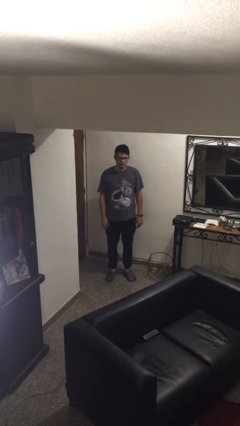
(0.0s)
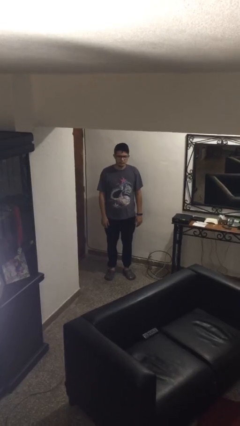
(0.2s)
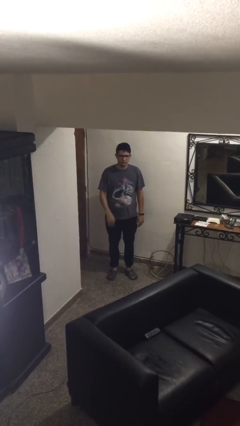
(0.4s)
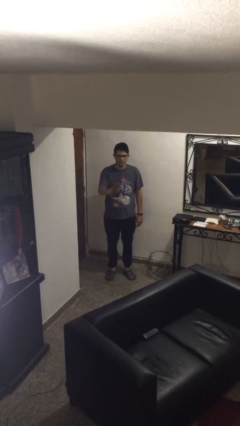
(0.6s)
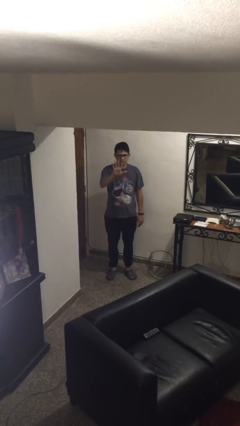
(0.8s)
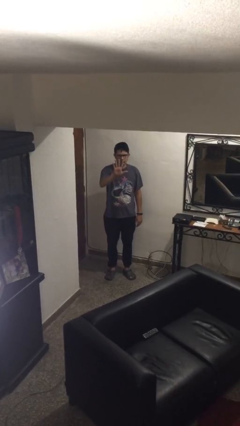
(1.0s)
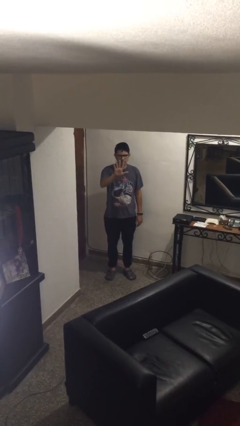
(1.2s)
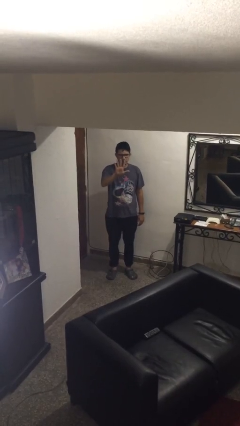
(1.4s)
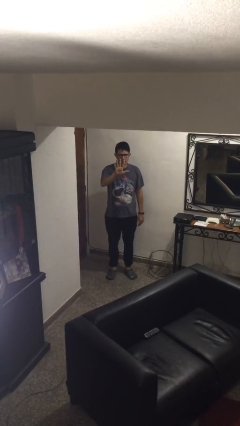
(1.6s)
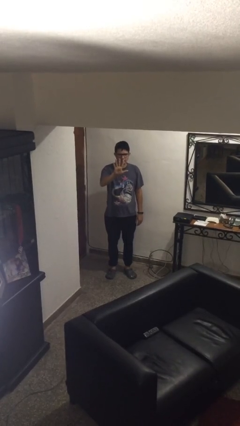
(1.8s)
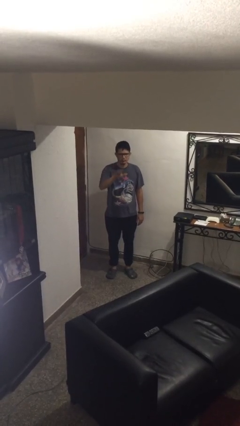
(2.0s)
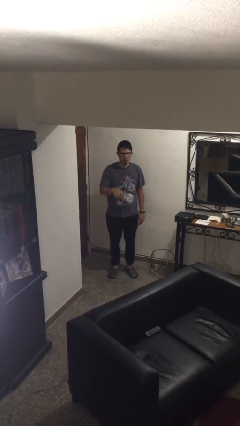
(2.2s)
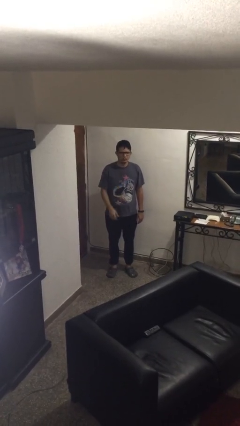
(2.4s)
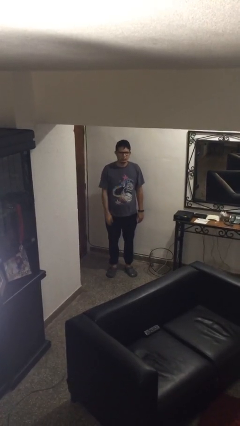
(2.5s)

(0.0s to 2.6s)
person gestures number five

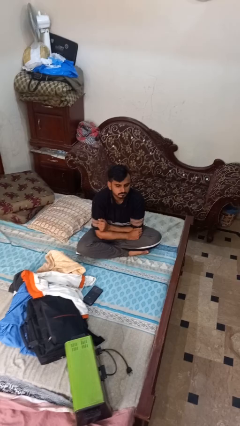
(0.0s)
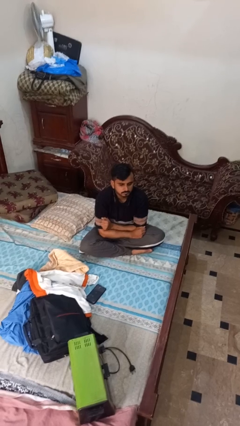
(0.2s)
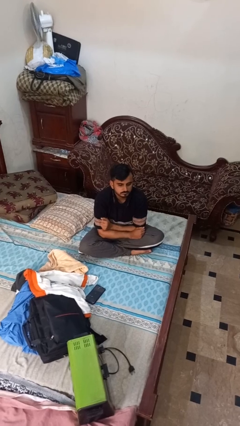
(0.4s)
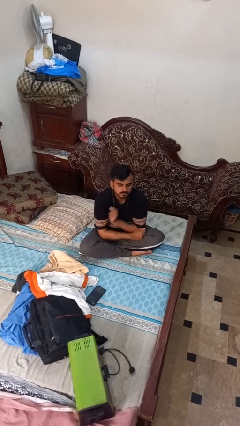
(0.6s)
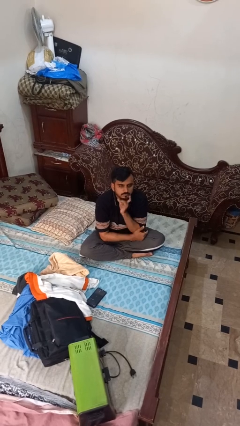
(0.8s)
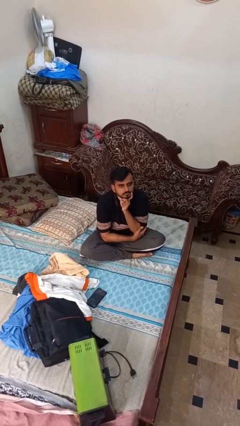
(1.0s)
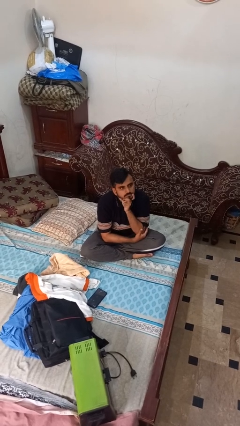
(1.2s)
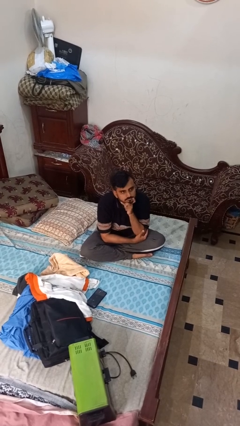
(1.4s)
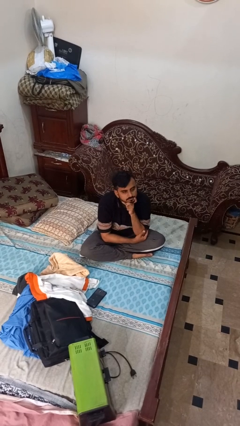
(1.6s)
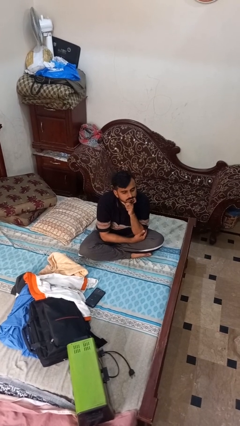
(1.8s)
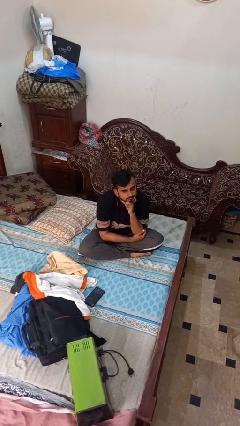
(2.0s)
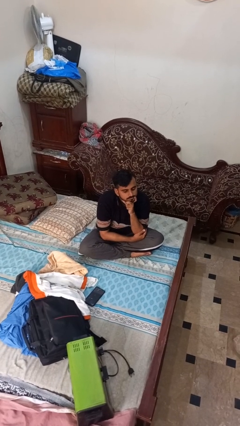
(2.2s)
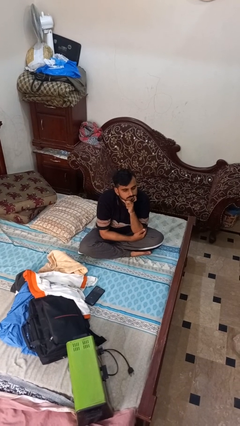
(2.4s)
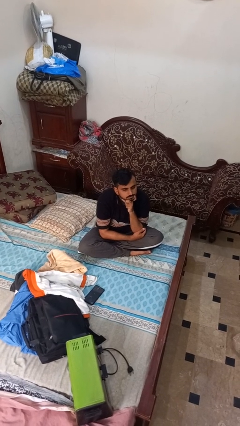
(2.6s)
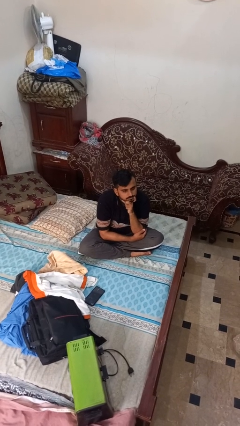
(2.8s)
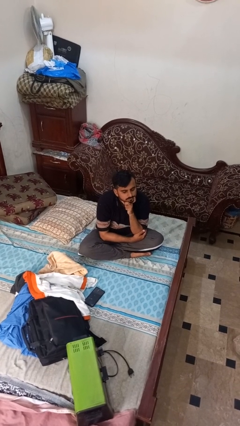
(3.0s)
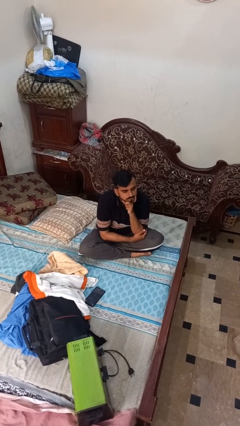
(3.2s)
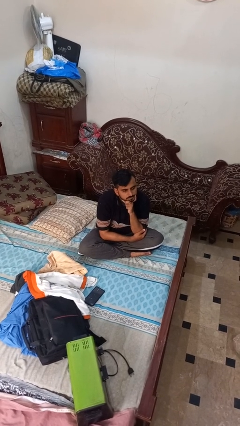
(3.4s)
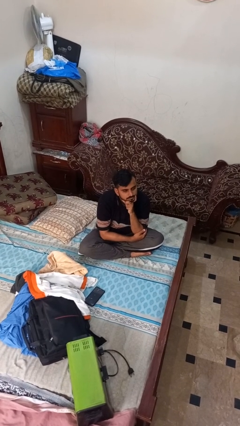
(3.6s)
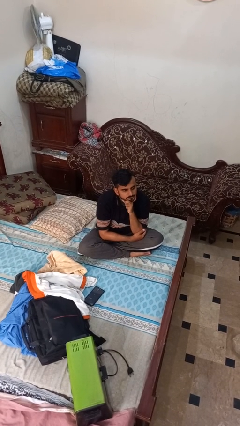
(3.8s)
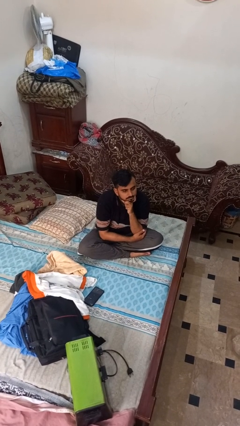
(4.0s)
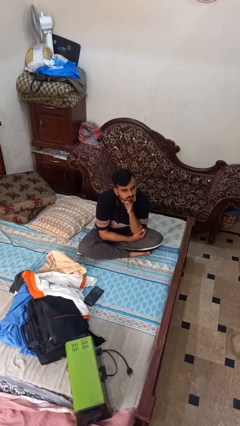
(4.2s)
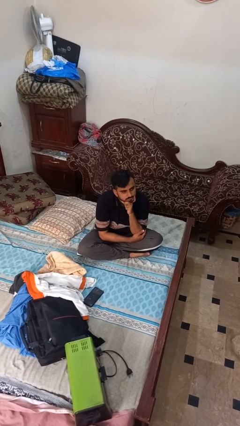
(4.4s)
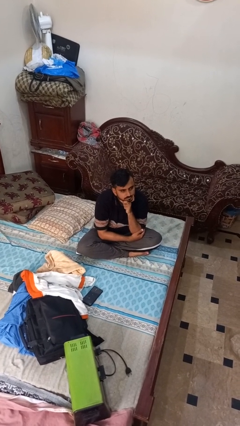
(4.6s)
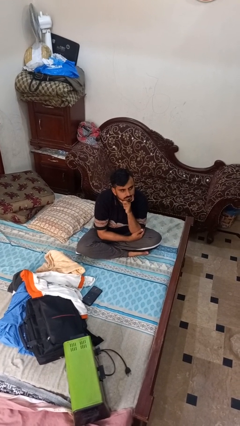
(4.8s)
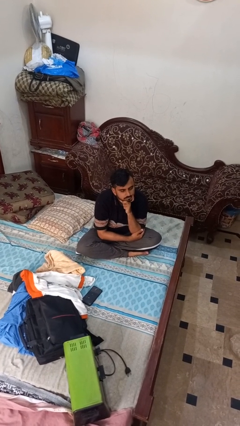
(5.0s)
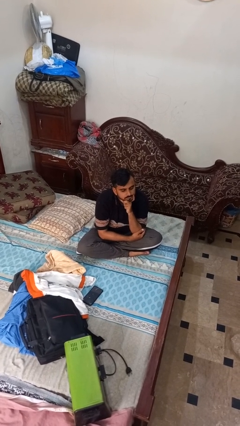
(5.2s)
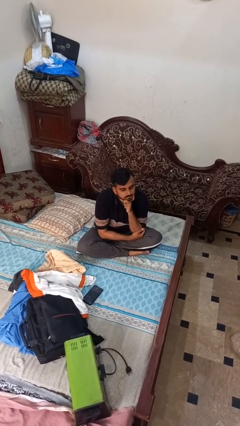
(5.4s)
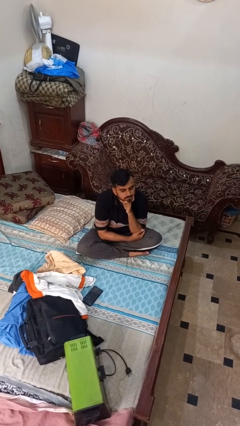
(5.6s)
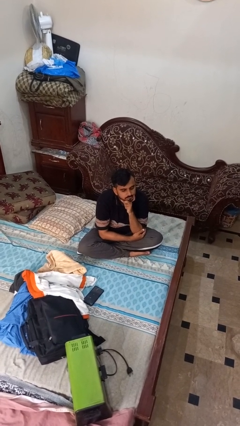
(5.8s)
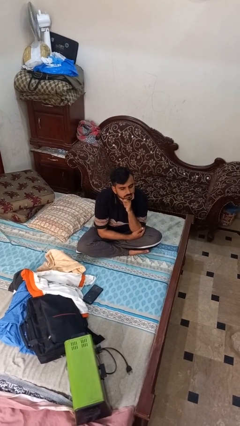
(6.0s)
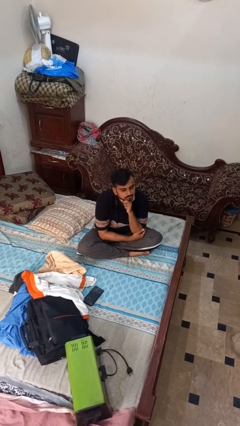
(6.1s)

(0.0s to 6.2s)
person strokes chin

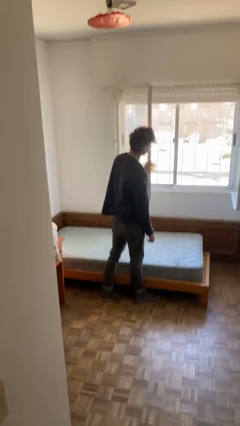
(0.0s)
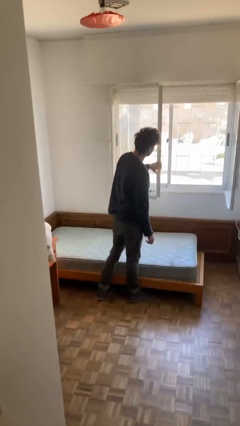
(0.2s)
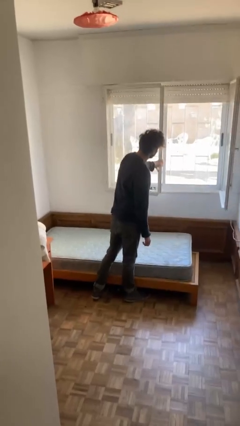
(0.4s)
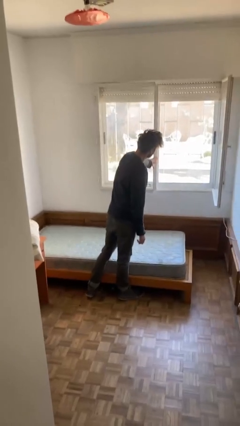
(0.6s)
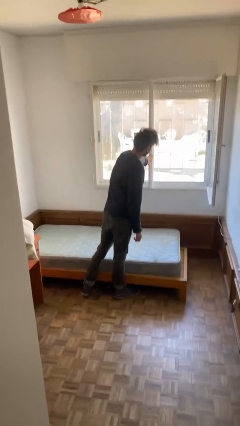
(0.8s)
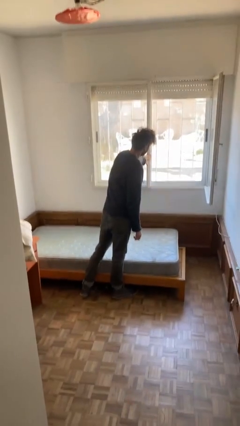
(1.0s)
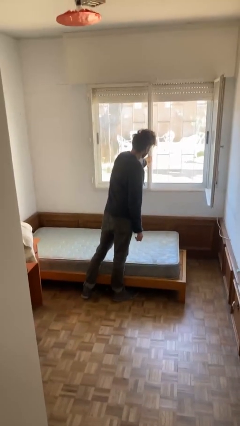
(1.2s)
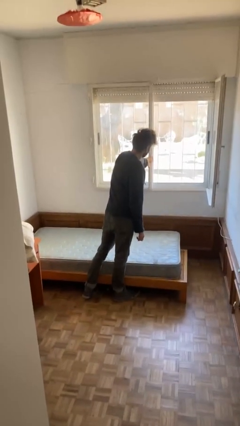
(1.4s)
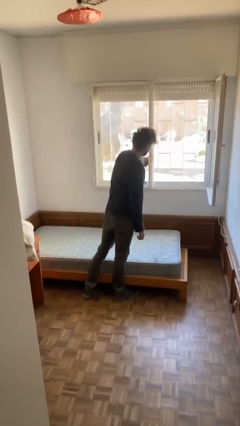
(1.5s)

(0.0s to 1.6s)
person closes home window

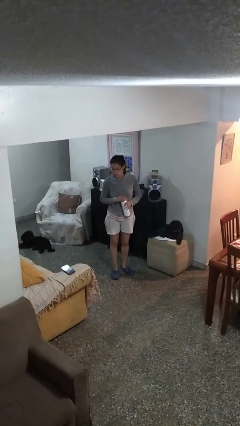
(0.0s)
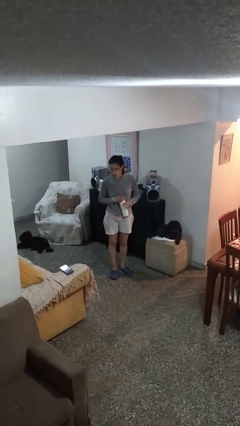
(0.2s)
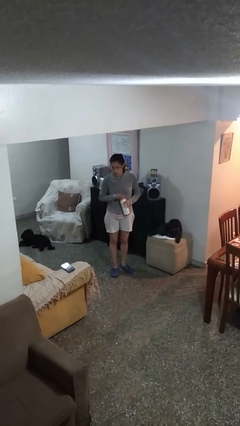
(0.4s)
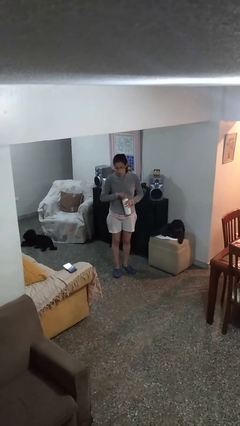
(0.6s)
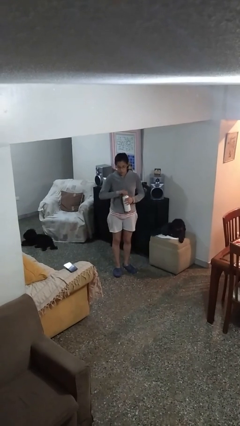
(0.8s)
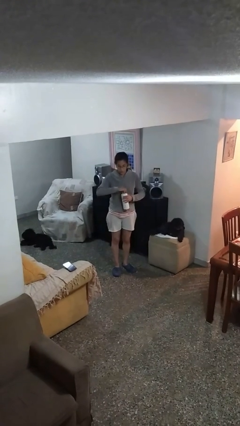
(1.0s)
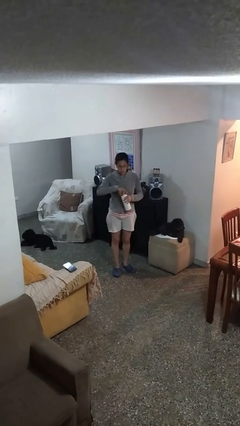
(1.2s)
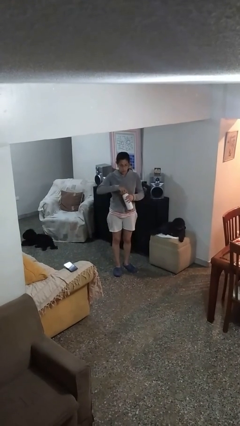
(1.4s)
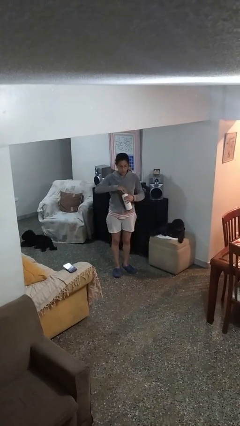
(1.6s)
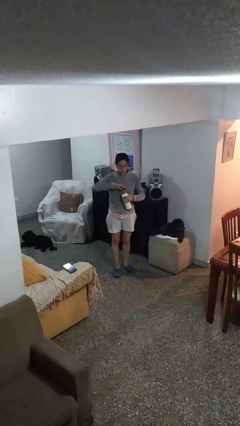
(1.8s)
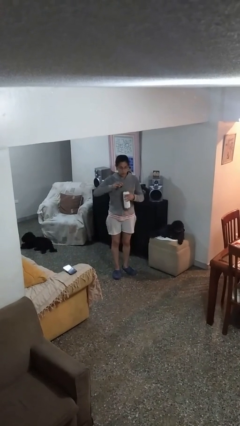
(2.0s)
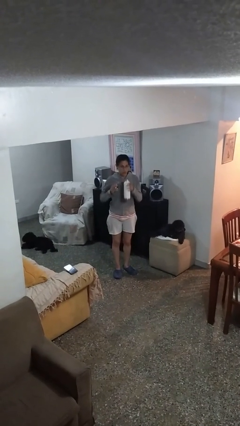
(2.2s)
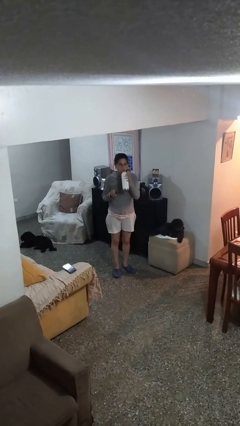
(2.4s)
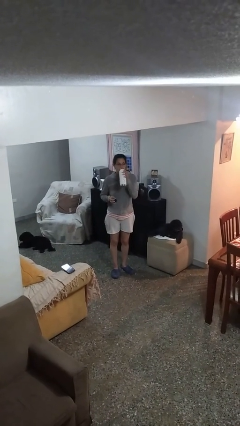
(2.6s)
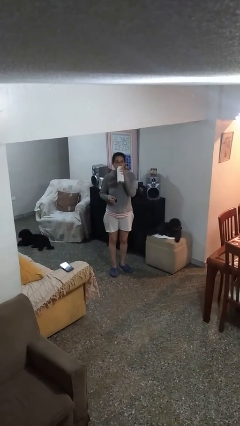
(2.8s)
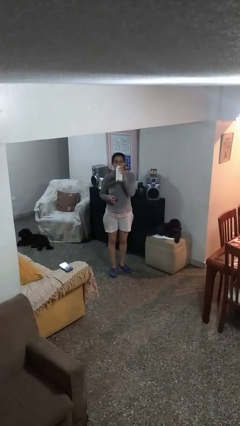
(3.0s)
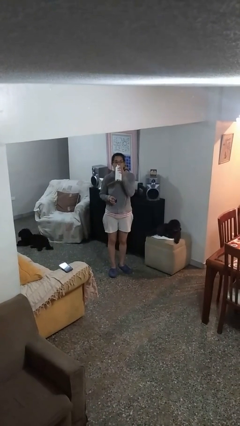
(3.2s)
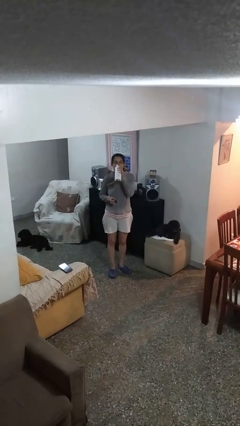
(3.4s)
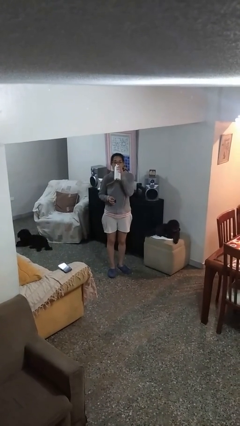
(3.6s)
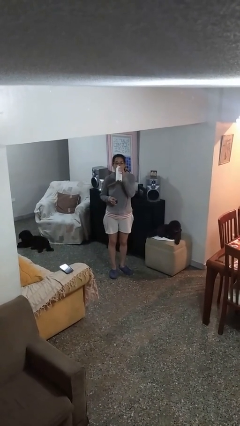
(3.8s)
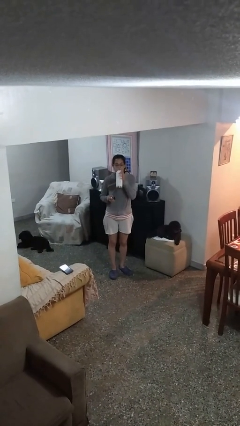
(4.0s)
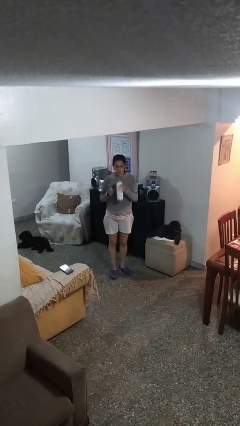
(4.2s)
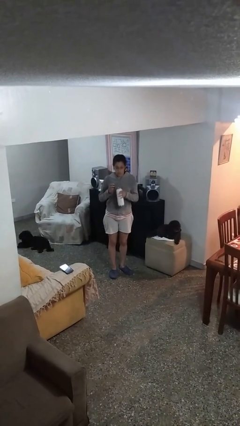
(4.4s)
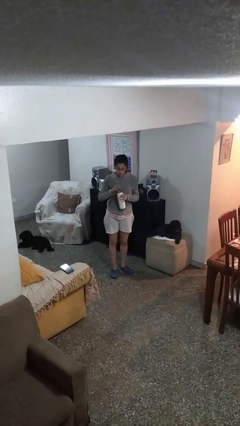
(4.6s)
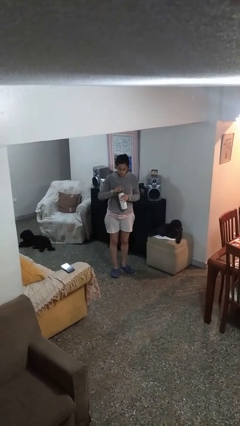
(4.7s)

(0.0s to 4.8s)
person drinks from bottle

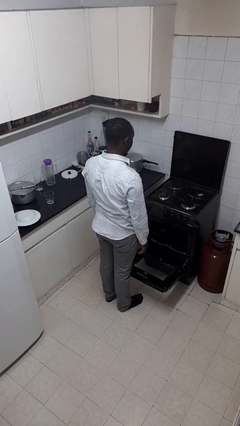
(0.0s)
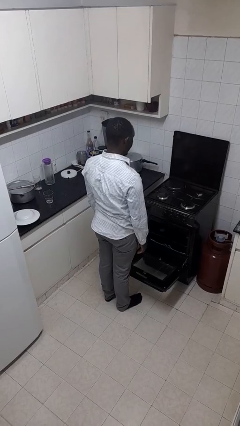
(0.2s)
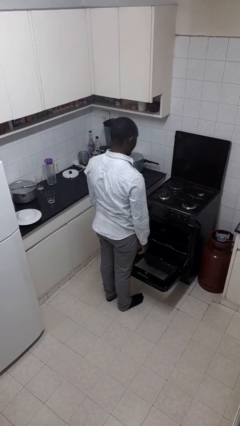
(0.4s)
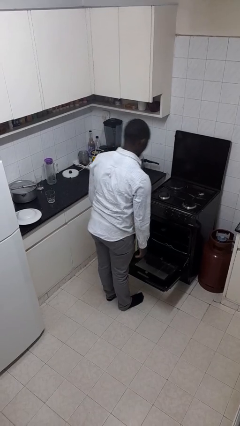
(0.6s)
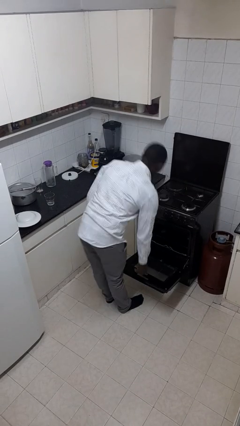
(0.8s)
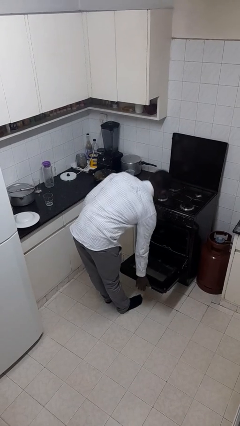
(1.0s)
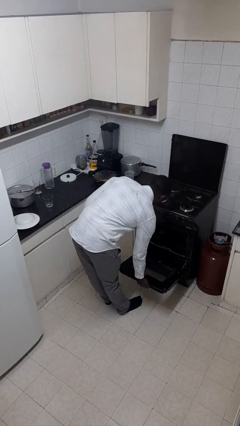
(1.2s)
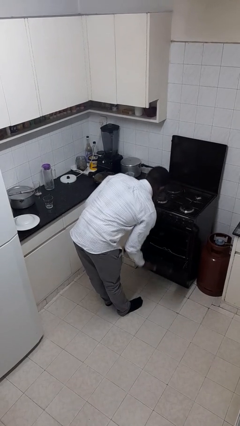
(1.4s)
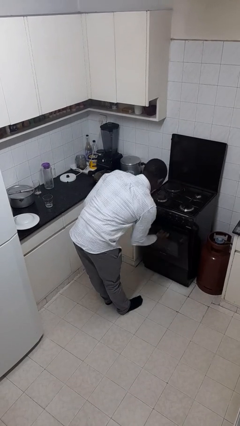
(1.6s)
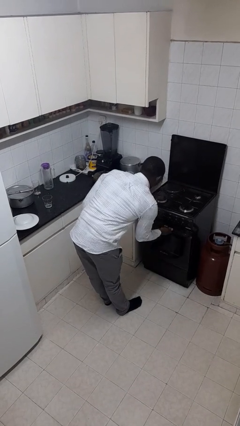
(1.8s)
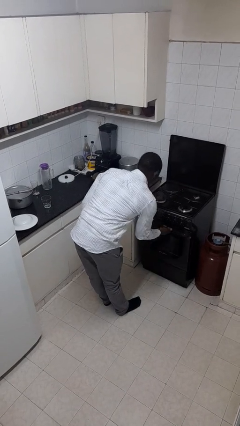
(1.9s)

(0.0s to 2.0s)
person closes oven door

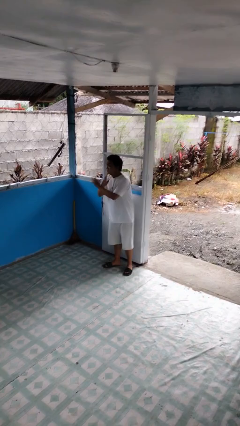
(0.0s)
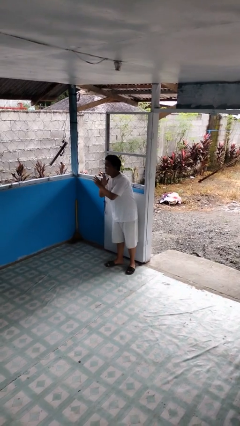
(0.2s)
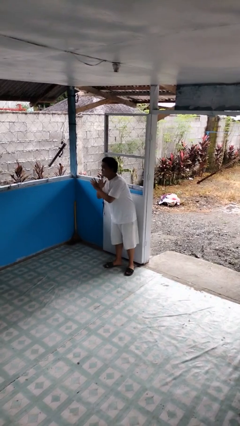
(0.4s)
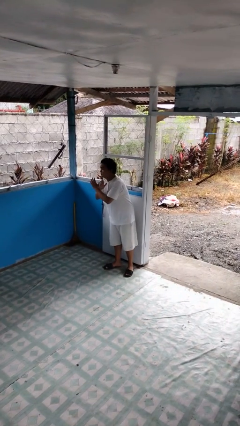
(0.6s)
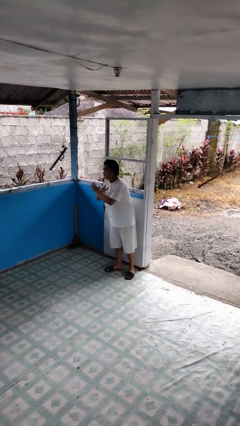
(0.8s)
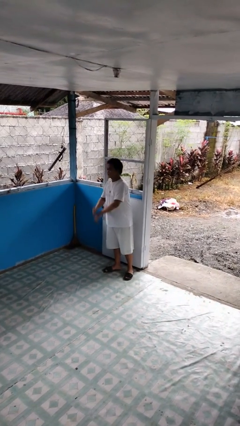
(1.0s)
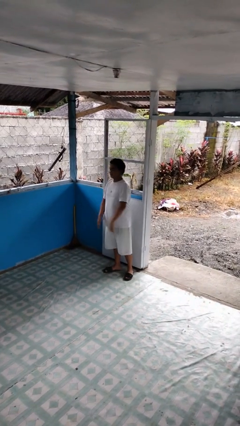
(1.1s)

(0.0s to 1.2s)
person gestures arms x
